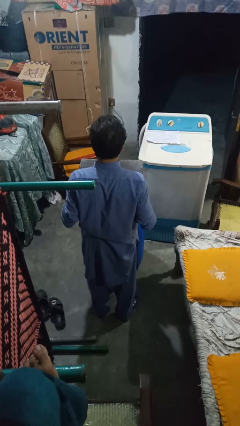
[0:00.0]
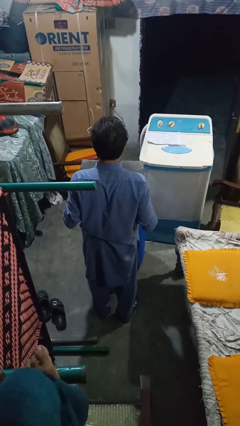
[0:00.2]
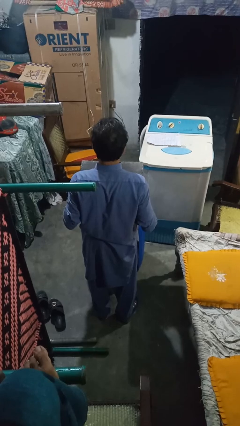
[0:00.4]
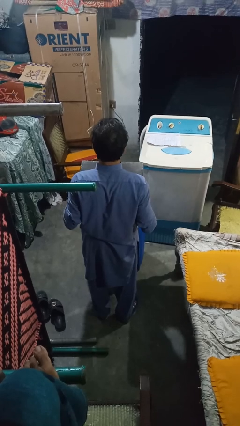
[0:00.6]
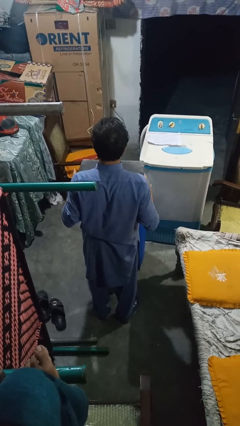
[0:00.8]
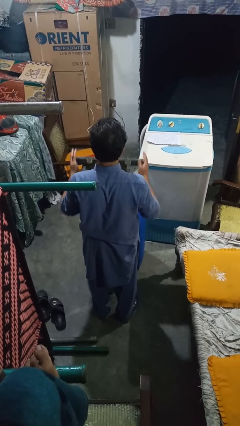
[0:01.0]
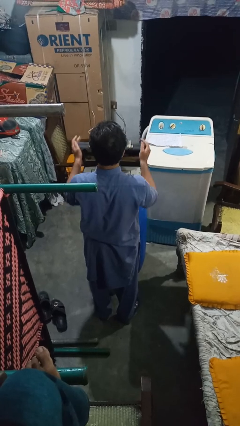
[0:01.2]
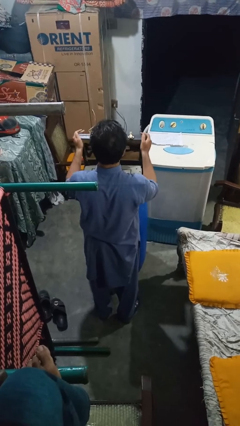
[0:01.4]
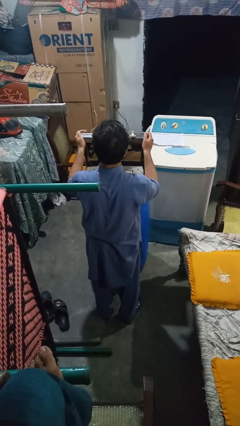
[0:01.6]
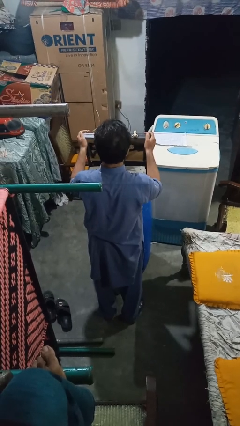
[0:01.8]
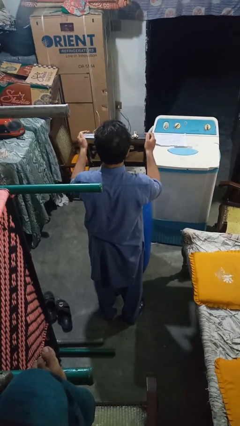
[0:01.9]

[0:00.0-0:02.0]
person opens suitcase

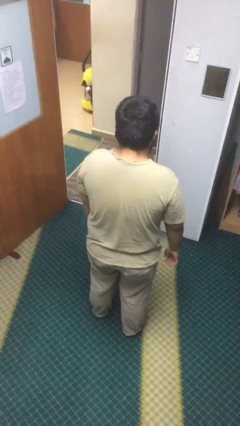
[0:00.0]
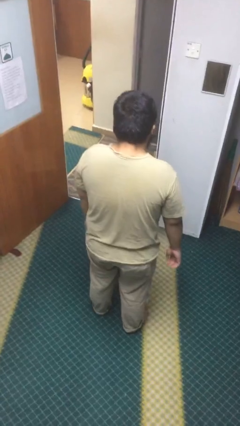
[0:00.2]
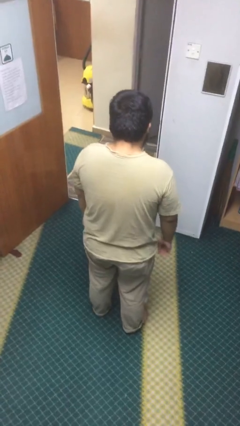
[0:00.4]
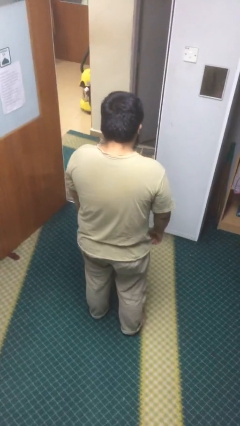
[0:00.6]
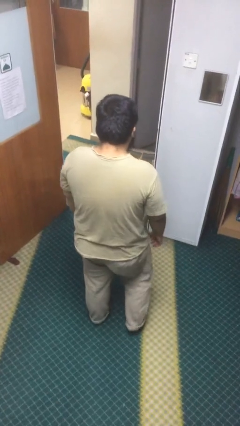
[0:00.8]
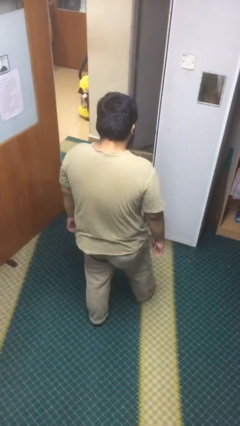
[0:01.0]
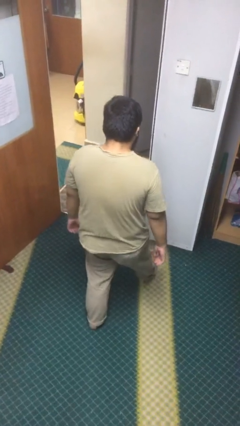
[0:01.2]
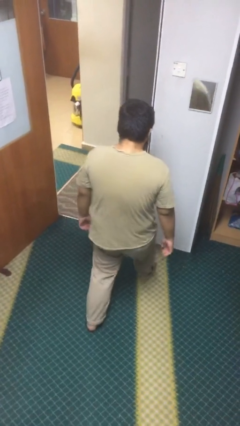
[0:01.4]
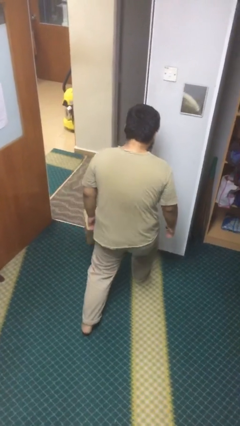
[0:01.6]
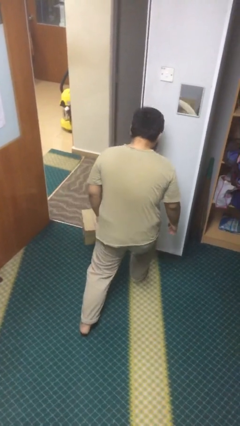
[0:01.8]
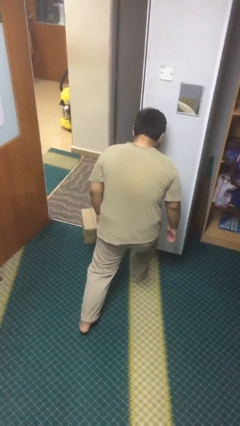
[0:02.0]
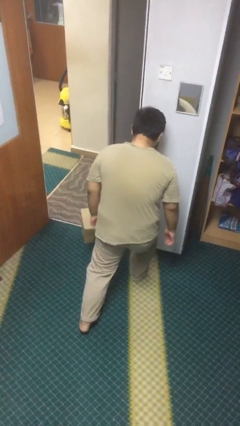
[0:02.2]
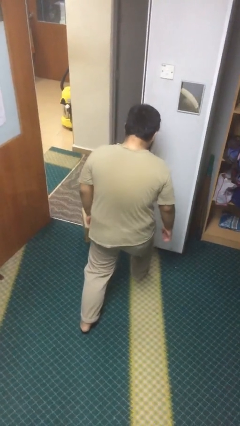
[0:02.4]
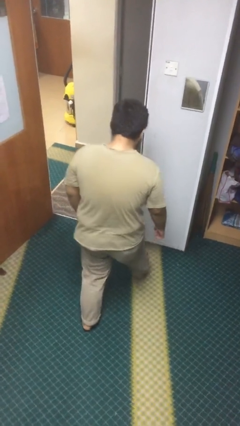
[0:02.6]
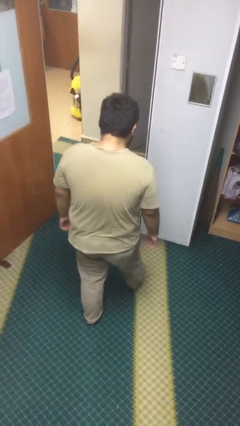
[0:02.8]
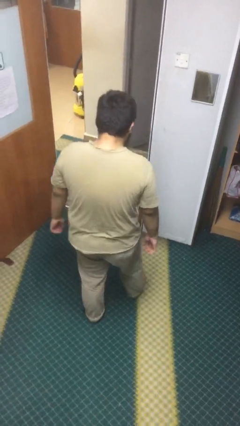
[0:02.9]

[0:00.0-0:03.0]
person exercises with lunges

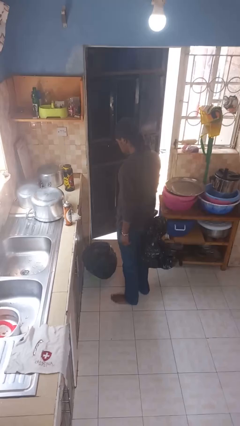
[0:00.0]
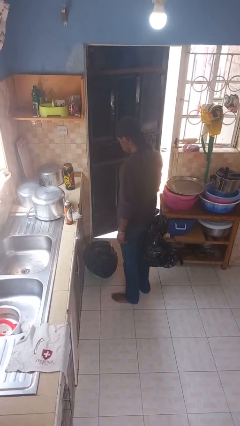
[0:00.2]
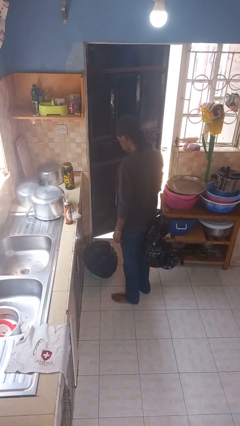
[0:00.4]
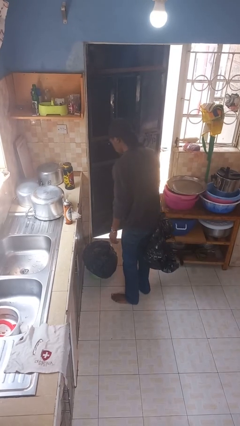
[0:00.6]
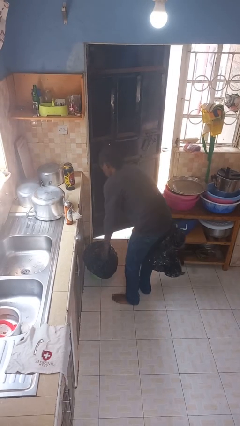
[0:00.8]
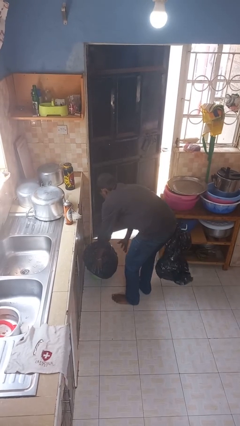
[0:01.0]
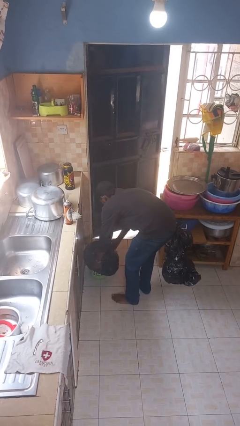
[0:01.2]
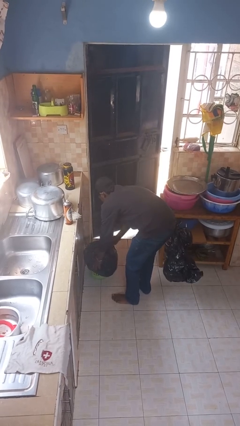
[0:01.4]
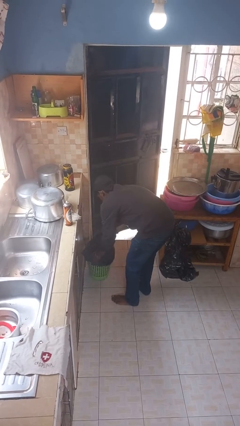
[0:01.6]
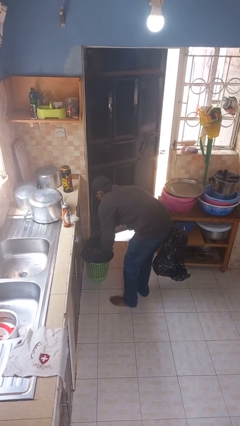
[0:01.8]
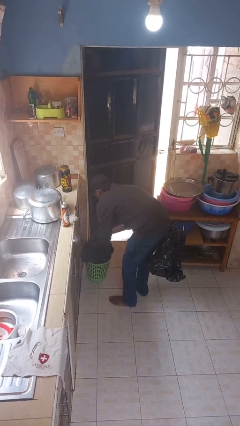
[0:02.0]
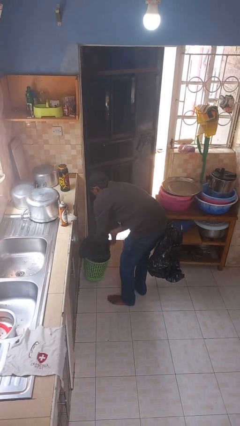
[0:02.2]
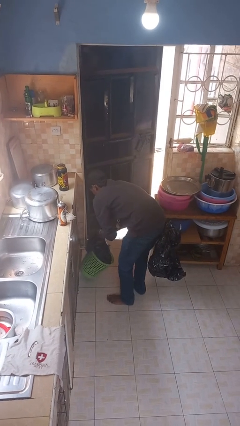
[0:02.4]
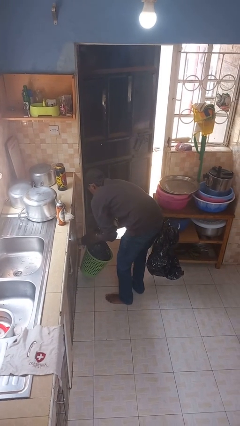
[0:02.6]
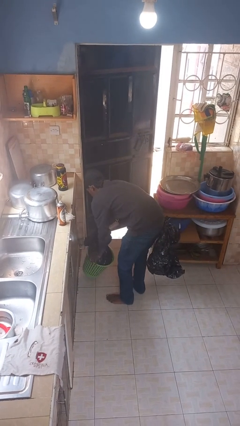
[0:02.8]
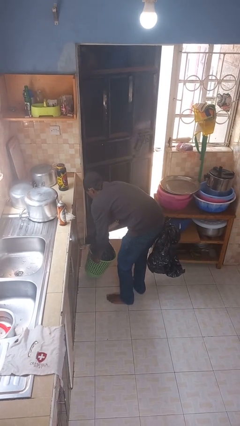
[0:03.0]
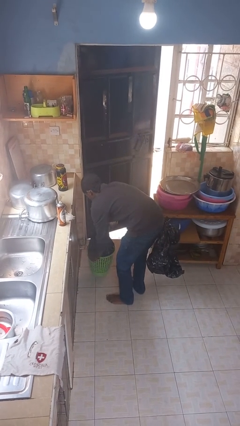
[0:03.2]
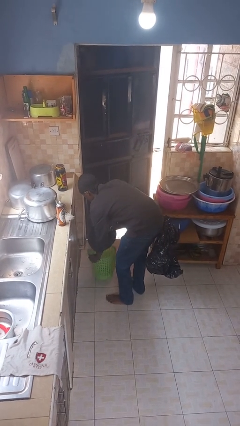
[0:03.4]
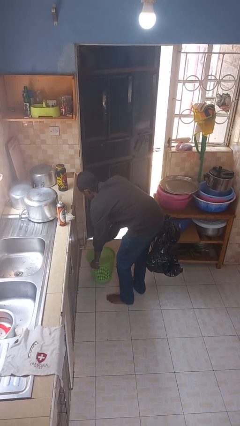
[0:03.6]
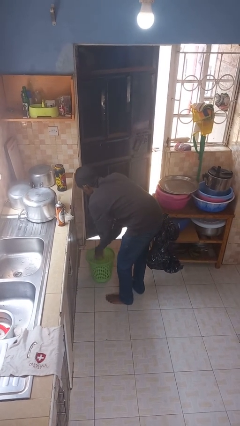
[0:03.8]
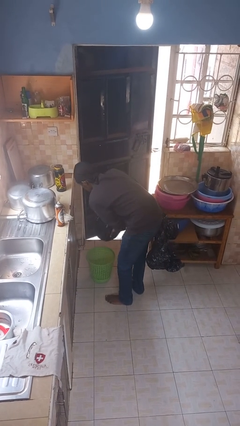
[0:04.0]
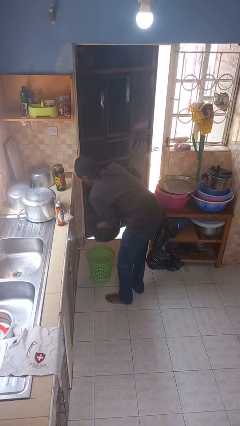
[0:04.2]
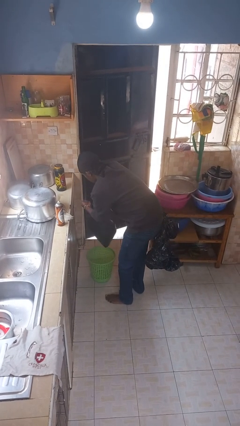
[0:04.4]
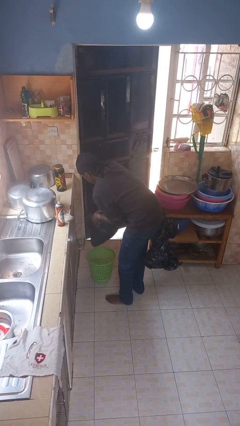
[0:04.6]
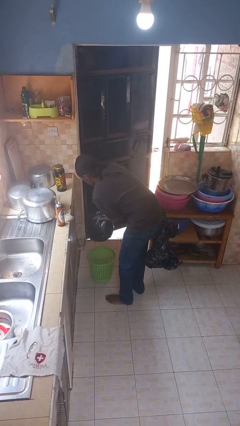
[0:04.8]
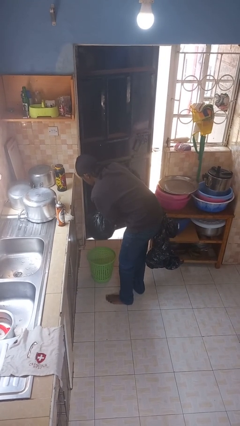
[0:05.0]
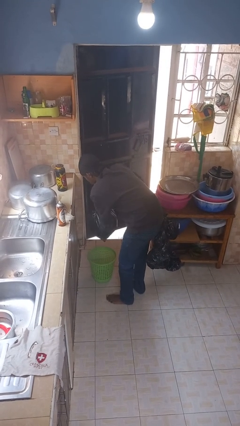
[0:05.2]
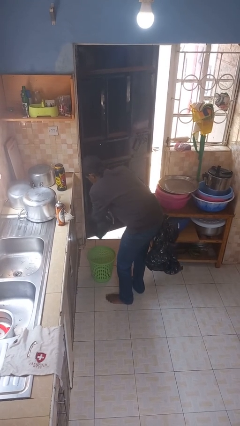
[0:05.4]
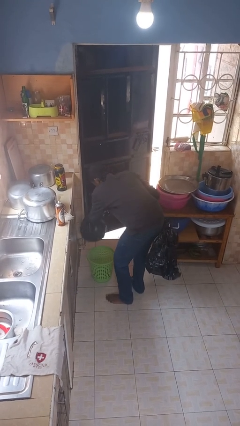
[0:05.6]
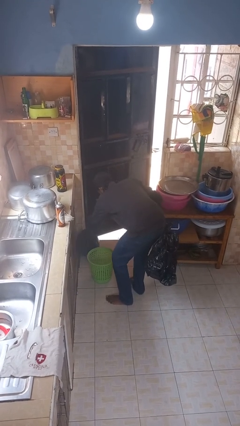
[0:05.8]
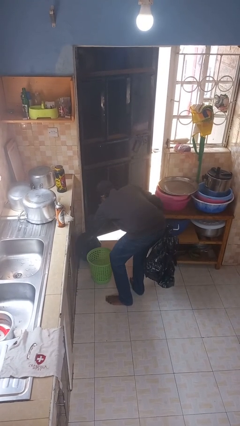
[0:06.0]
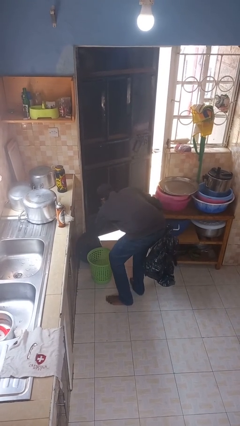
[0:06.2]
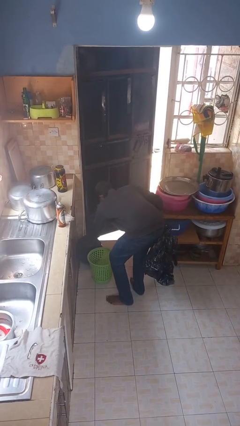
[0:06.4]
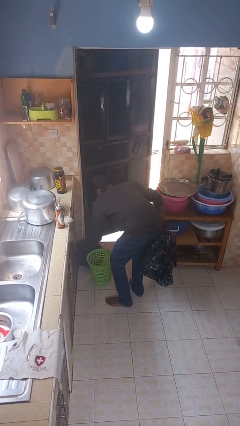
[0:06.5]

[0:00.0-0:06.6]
person removes trashbag from trashcan

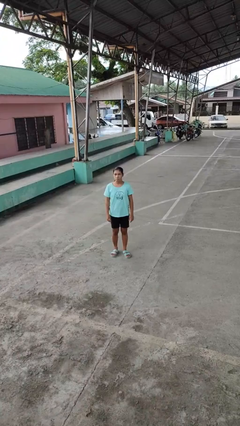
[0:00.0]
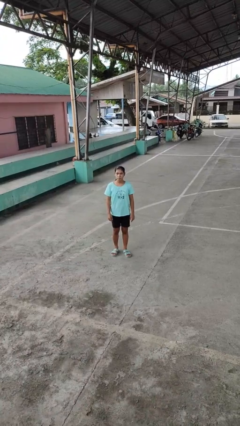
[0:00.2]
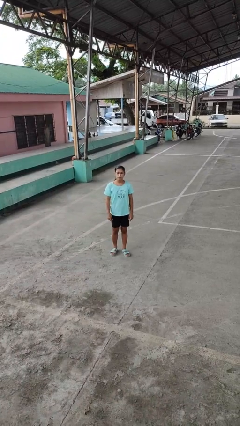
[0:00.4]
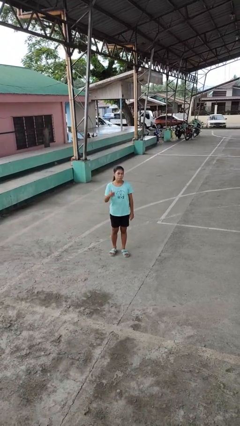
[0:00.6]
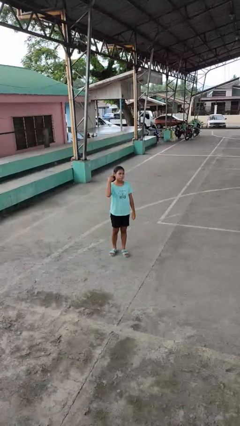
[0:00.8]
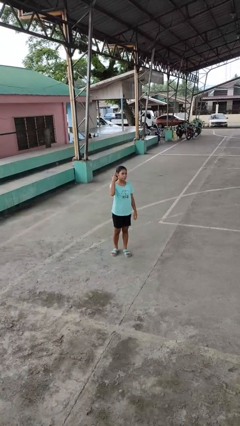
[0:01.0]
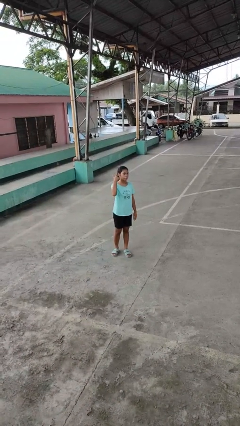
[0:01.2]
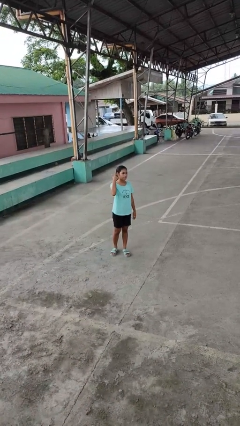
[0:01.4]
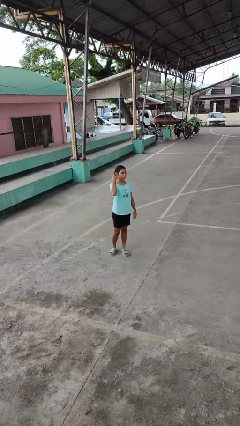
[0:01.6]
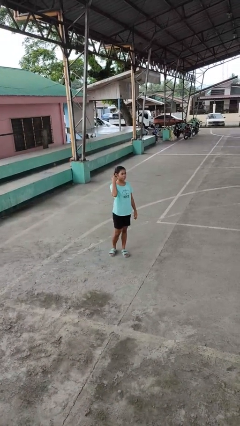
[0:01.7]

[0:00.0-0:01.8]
person gestures listen closely

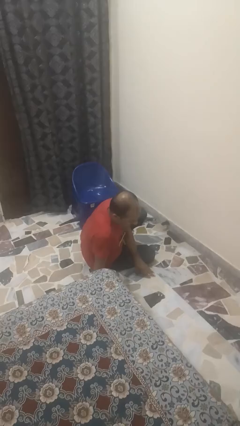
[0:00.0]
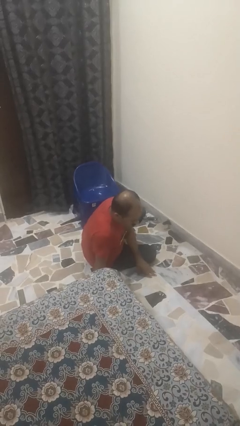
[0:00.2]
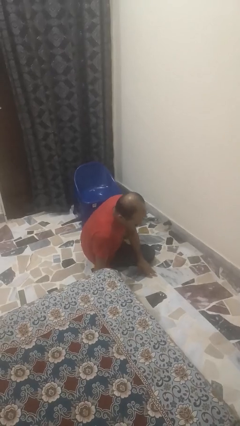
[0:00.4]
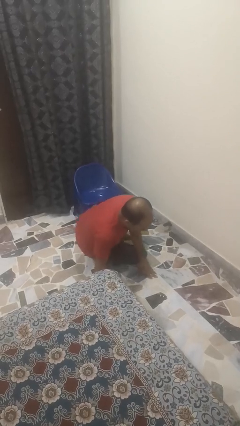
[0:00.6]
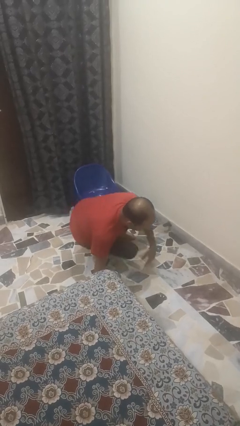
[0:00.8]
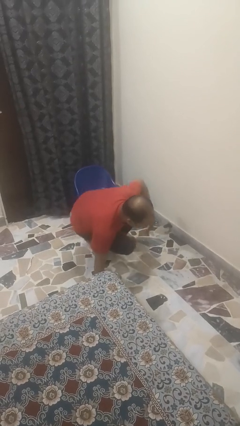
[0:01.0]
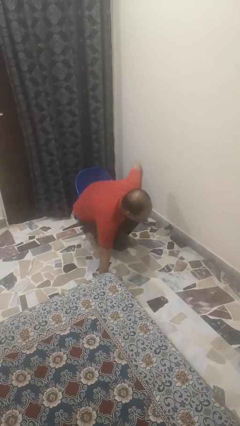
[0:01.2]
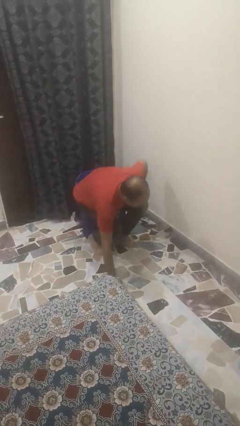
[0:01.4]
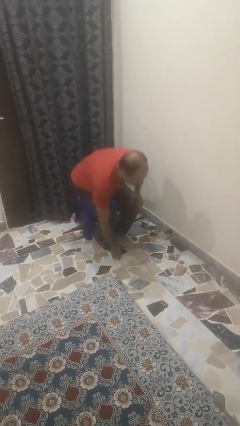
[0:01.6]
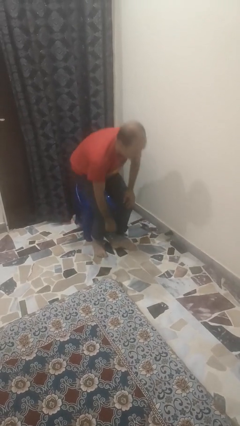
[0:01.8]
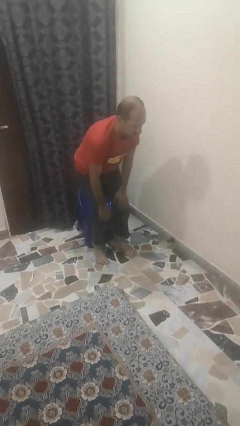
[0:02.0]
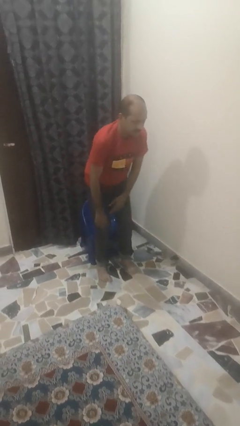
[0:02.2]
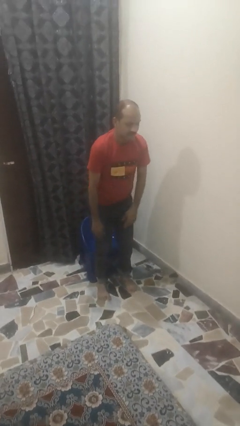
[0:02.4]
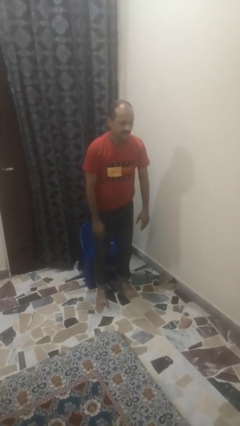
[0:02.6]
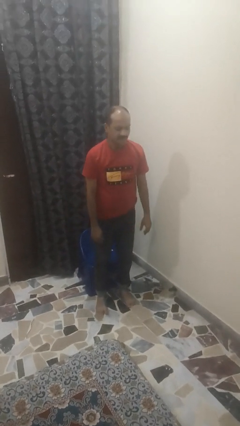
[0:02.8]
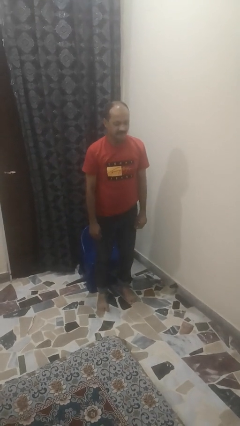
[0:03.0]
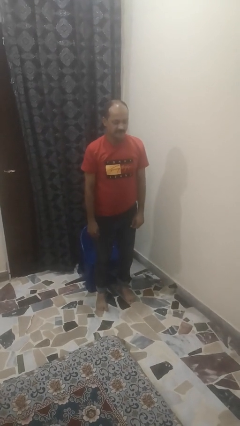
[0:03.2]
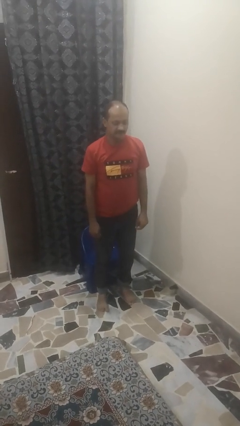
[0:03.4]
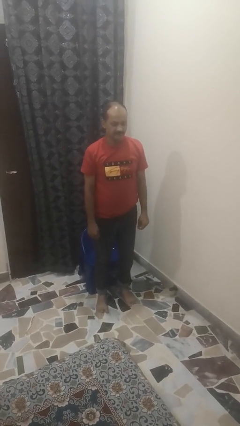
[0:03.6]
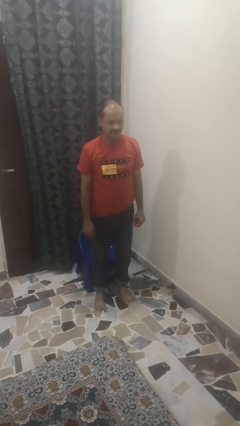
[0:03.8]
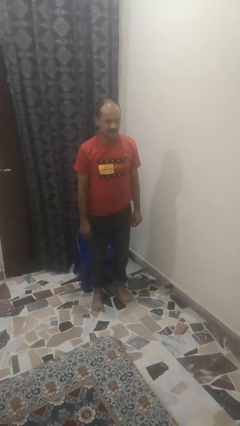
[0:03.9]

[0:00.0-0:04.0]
person stands up from floor
